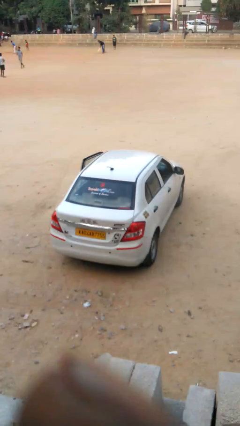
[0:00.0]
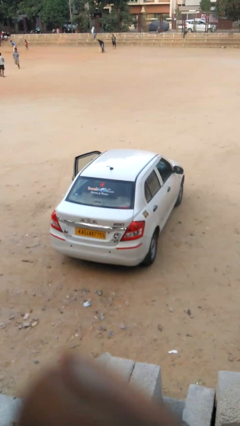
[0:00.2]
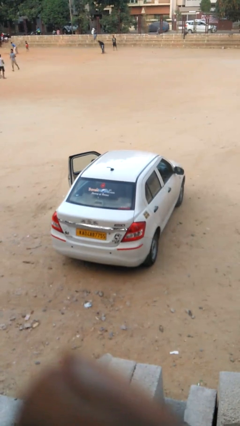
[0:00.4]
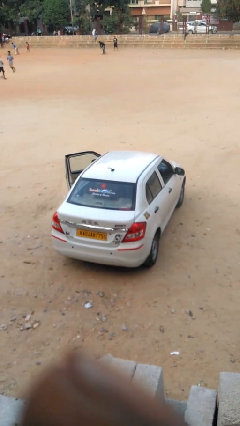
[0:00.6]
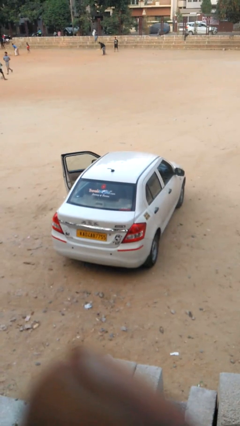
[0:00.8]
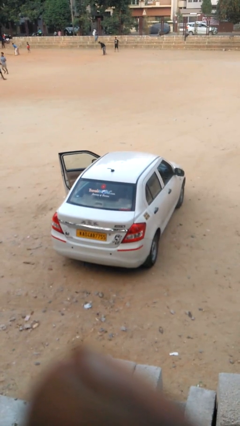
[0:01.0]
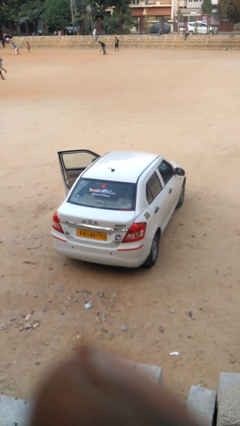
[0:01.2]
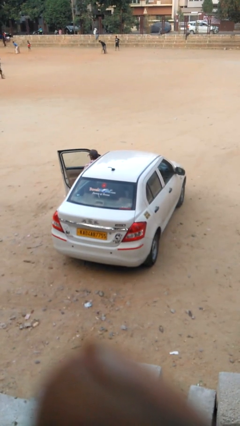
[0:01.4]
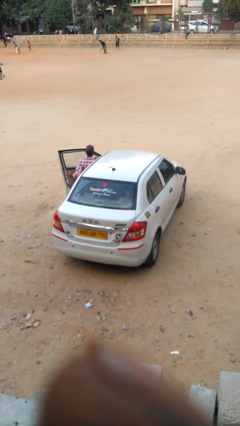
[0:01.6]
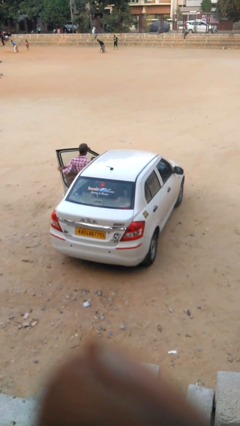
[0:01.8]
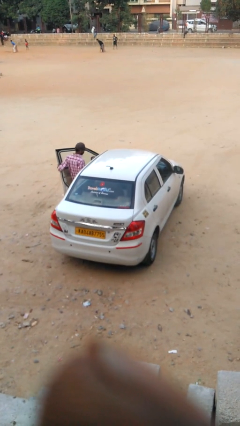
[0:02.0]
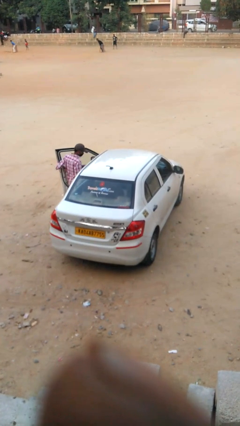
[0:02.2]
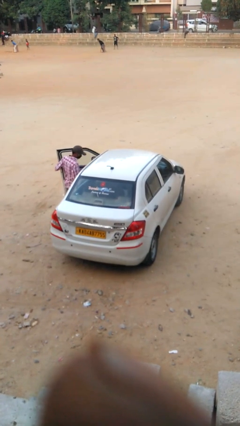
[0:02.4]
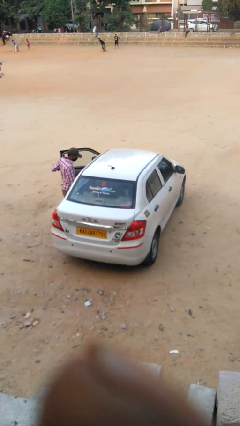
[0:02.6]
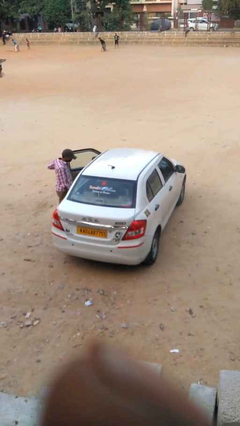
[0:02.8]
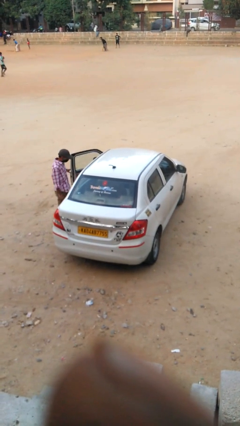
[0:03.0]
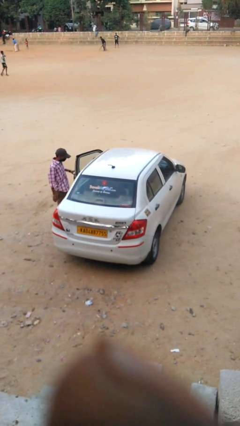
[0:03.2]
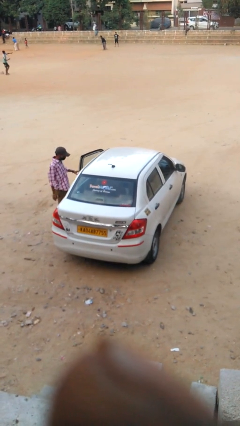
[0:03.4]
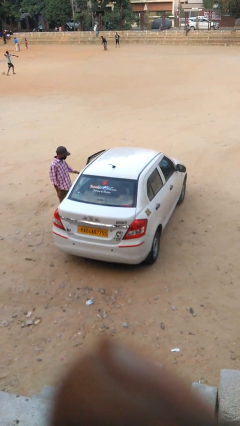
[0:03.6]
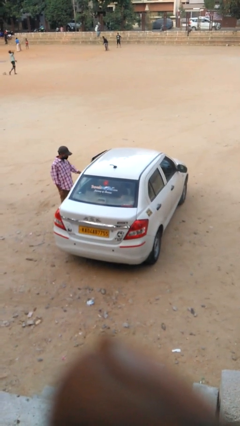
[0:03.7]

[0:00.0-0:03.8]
car drops off person

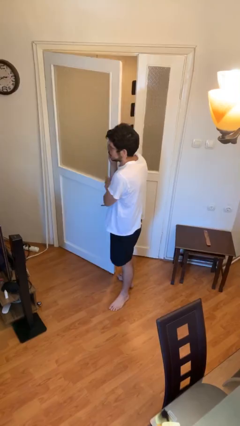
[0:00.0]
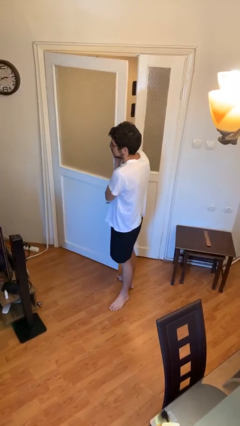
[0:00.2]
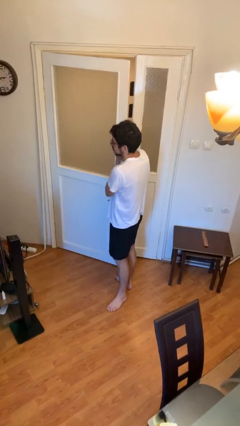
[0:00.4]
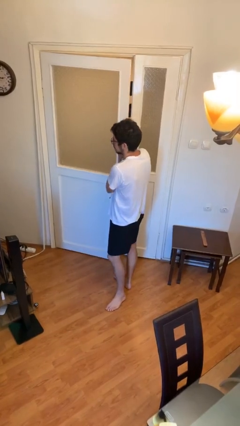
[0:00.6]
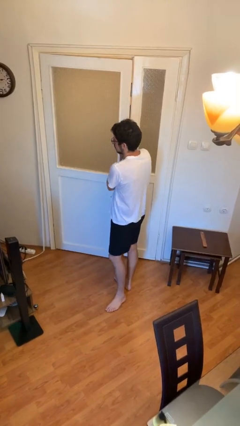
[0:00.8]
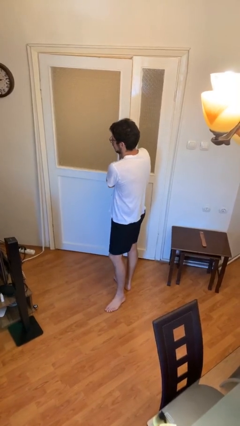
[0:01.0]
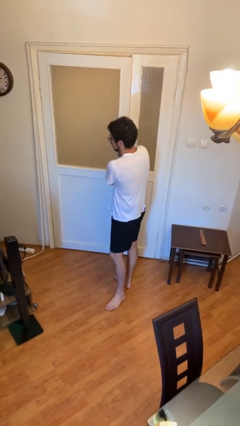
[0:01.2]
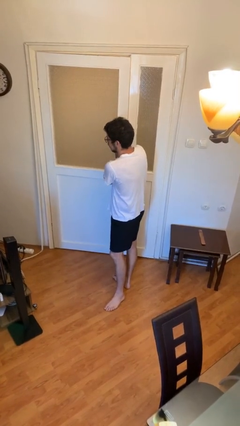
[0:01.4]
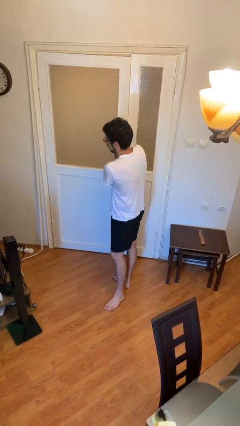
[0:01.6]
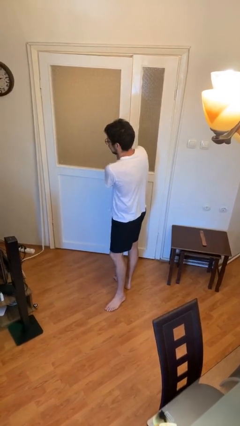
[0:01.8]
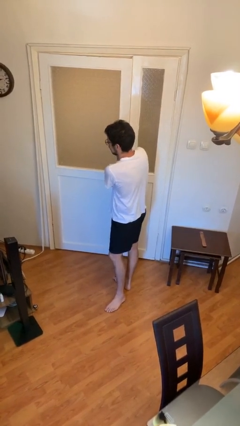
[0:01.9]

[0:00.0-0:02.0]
person closes facility door

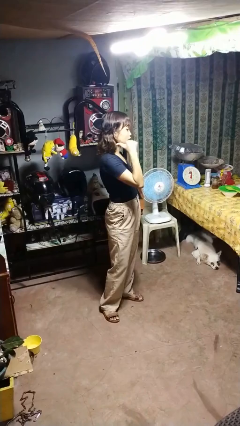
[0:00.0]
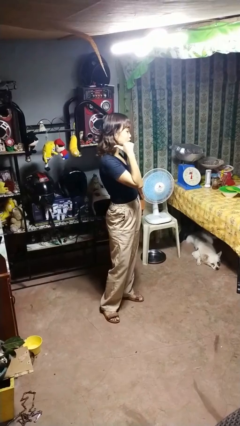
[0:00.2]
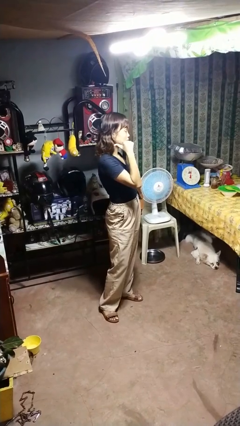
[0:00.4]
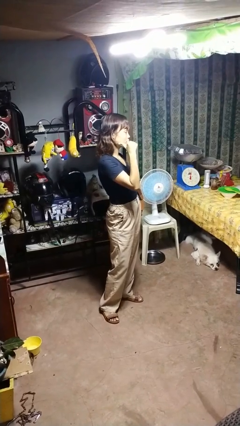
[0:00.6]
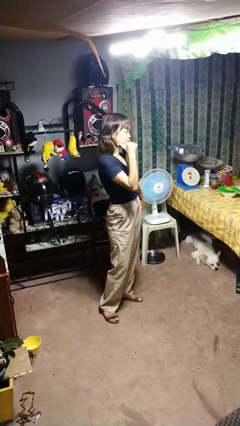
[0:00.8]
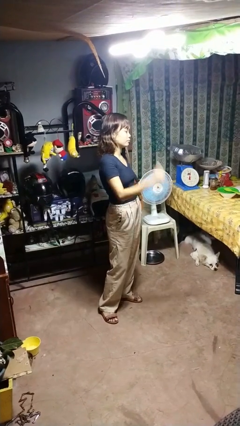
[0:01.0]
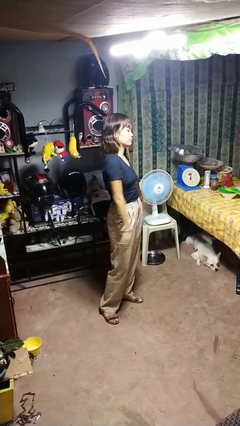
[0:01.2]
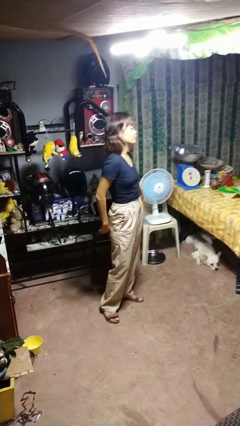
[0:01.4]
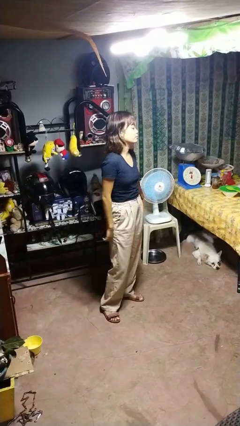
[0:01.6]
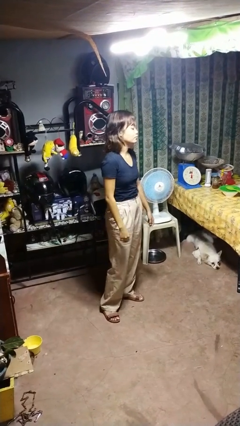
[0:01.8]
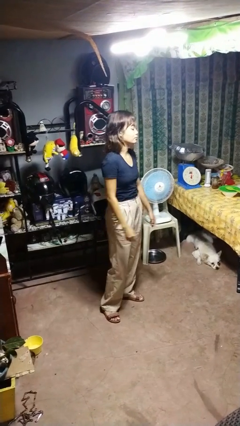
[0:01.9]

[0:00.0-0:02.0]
person gestures behind me

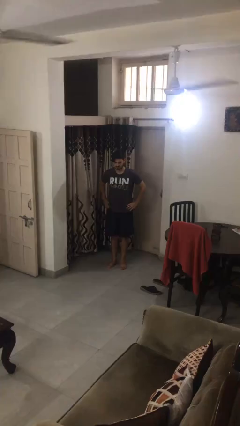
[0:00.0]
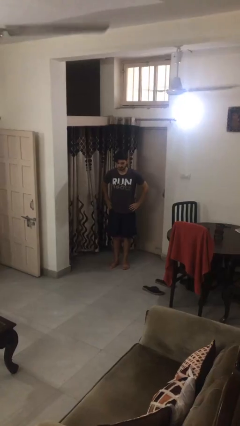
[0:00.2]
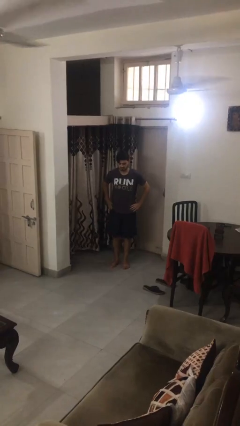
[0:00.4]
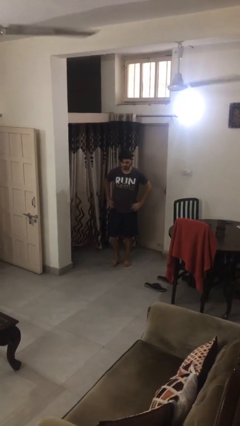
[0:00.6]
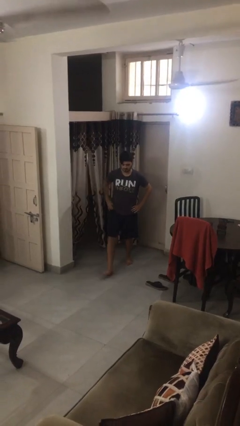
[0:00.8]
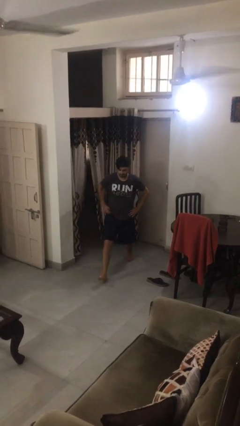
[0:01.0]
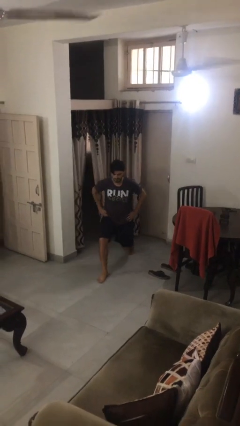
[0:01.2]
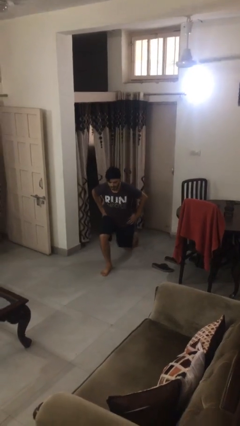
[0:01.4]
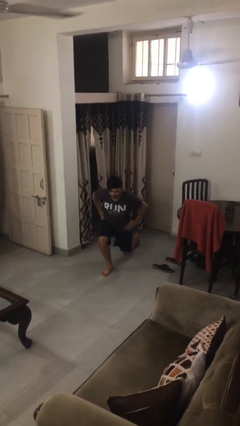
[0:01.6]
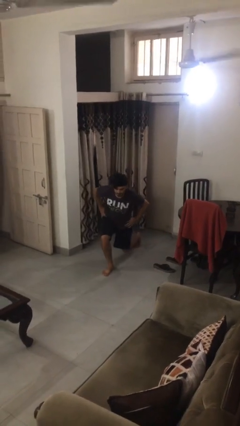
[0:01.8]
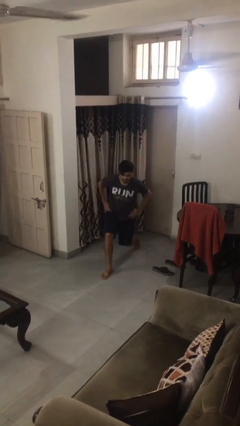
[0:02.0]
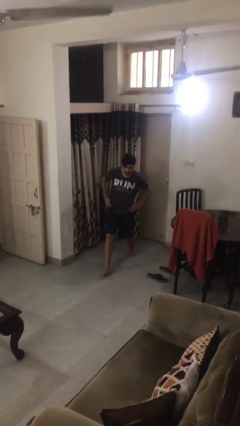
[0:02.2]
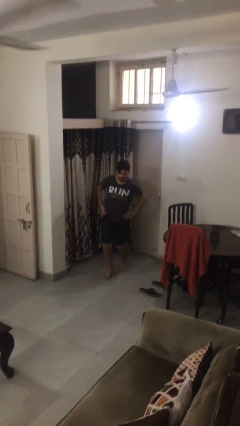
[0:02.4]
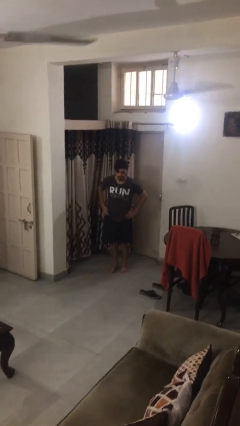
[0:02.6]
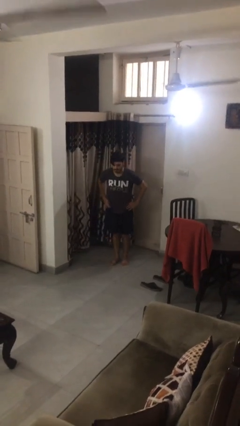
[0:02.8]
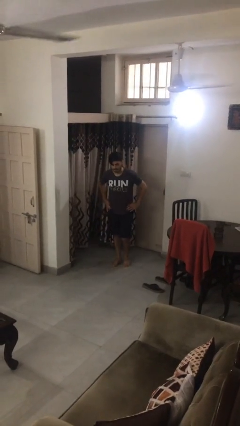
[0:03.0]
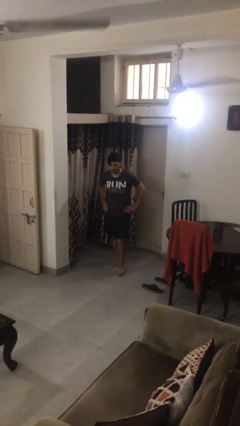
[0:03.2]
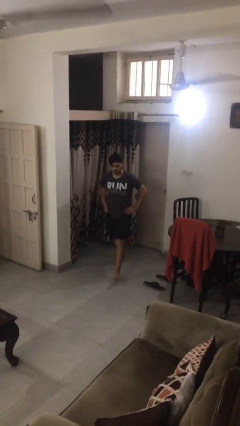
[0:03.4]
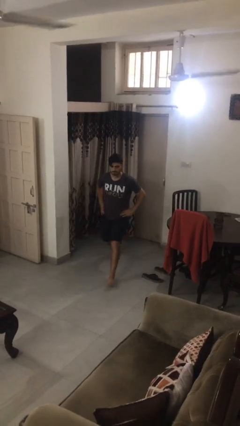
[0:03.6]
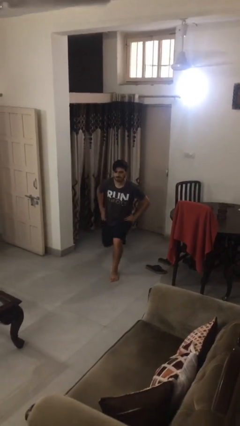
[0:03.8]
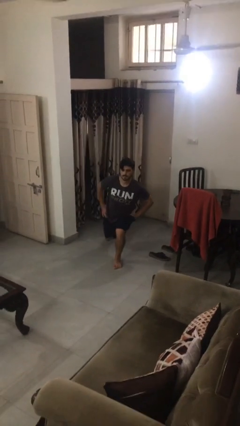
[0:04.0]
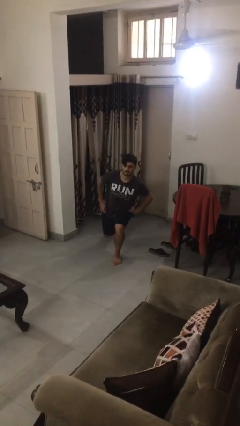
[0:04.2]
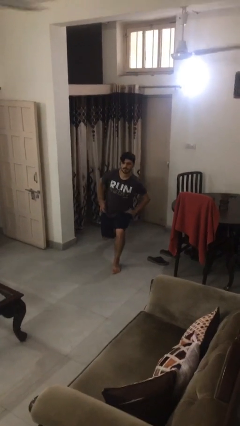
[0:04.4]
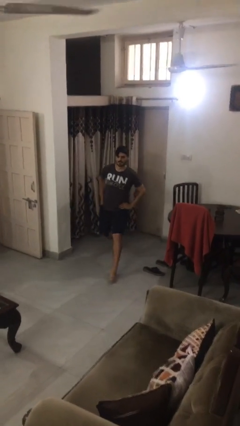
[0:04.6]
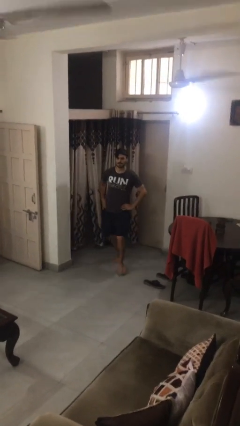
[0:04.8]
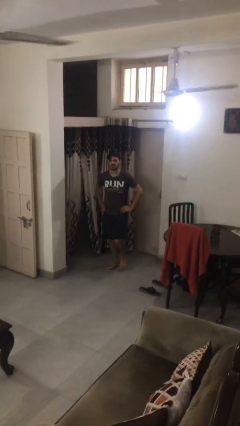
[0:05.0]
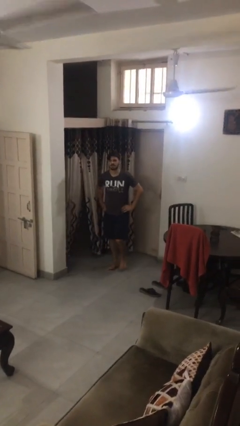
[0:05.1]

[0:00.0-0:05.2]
person exercises with lunges

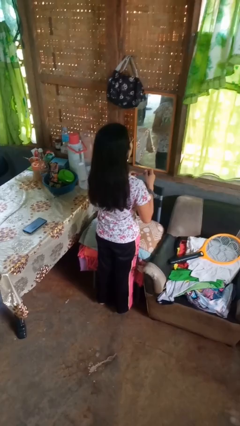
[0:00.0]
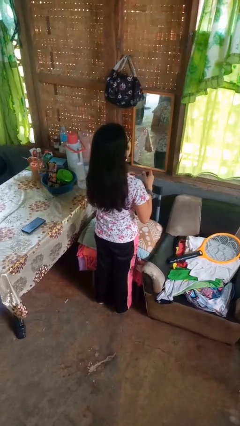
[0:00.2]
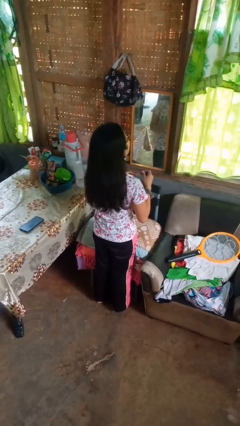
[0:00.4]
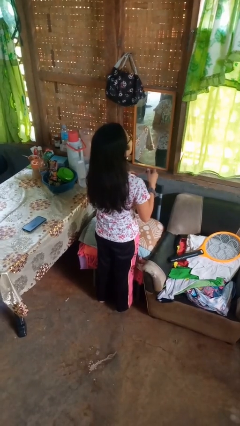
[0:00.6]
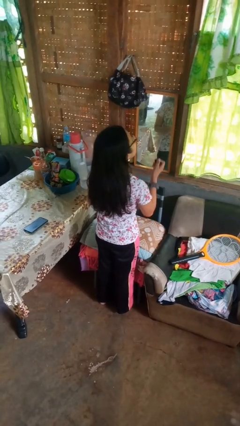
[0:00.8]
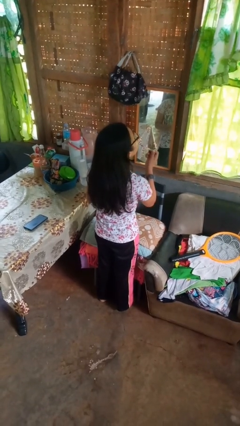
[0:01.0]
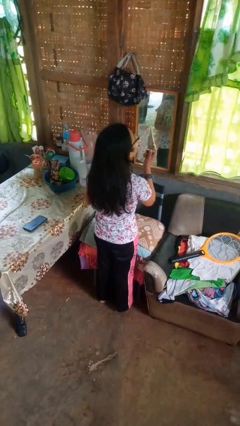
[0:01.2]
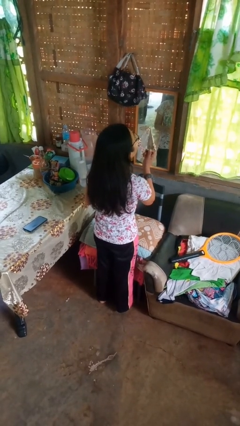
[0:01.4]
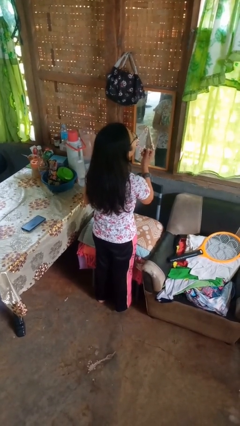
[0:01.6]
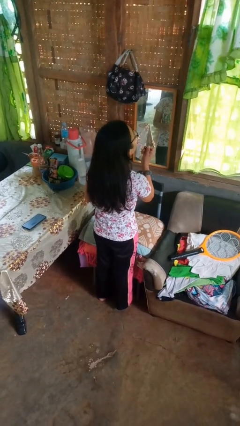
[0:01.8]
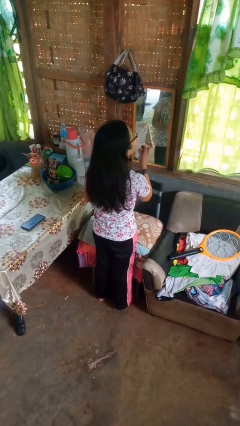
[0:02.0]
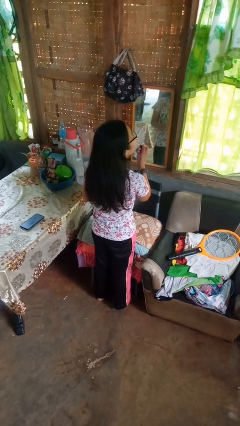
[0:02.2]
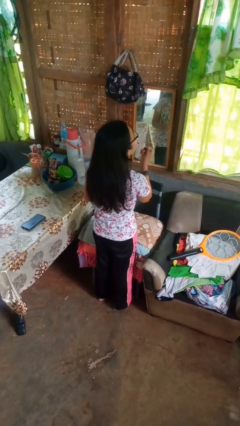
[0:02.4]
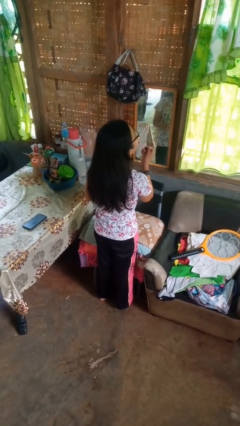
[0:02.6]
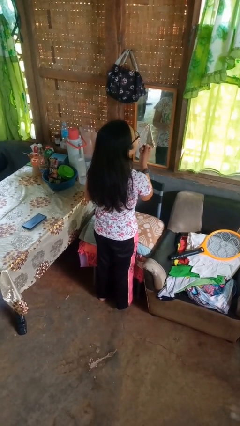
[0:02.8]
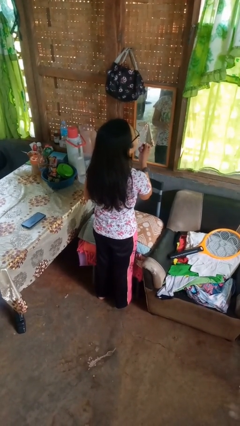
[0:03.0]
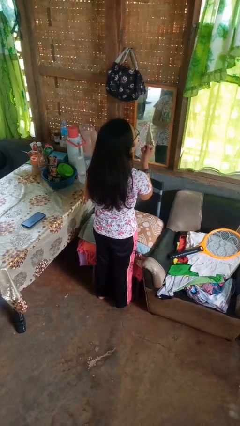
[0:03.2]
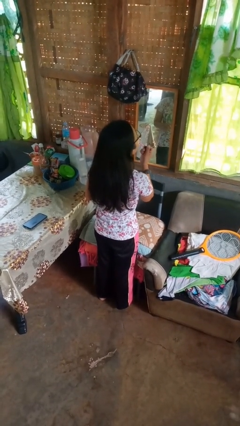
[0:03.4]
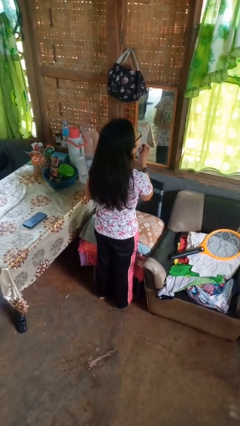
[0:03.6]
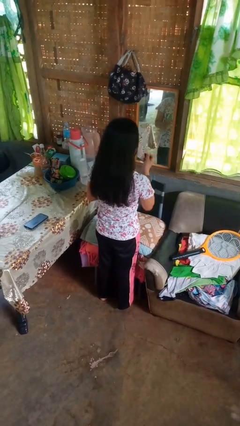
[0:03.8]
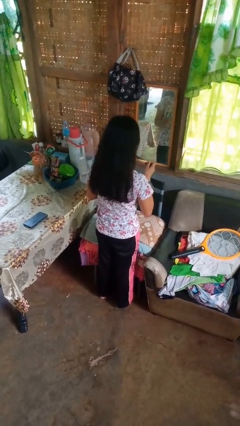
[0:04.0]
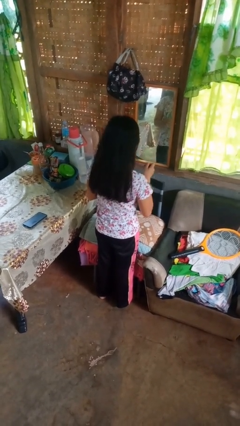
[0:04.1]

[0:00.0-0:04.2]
person applies lip makeup

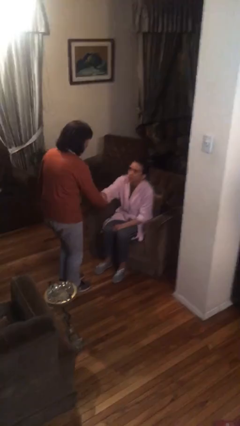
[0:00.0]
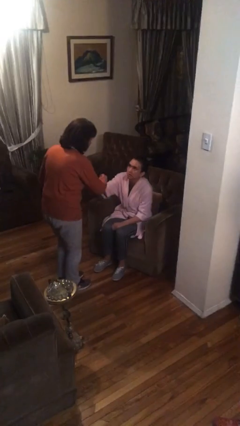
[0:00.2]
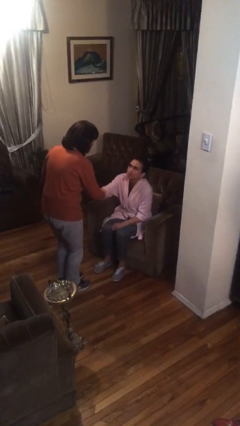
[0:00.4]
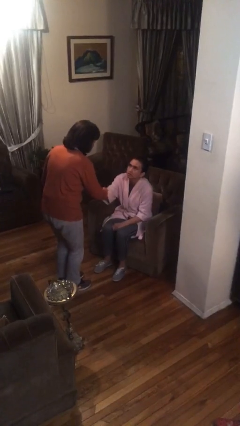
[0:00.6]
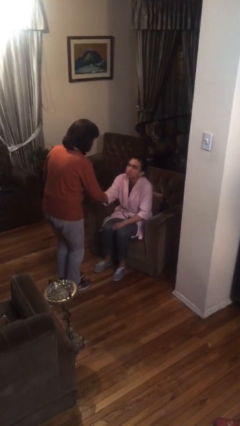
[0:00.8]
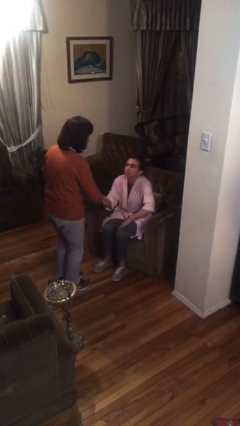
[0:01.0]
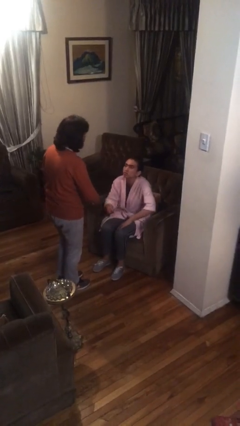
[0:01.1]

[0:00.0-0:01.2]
person shakes hand
